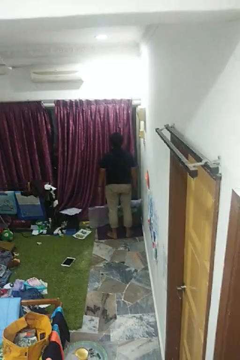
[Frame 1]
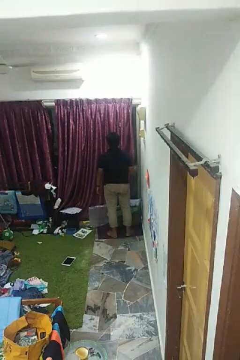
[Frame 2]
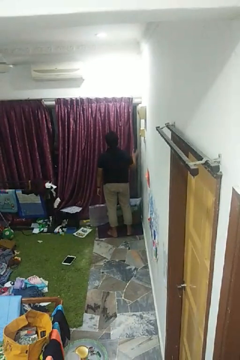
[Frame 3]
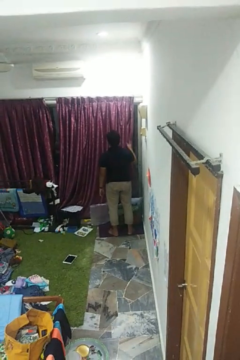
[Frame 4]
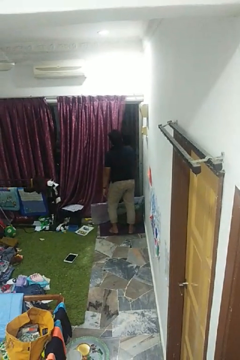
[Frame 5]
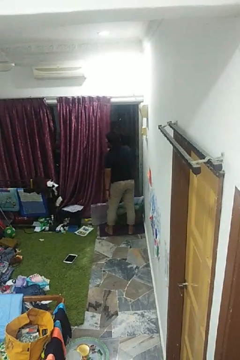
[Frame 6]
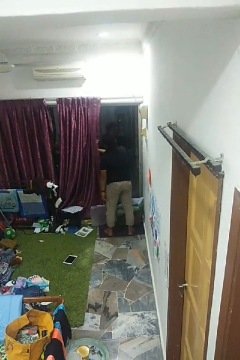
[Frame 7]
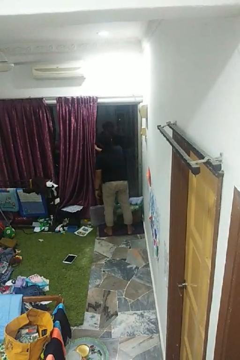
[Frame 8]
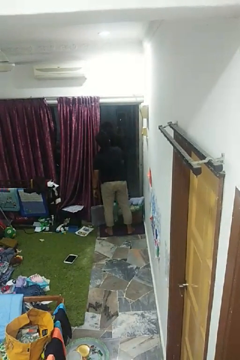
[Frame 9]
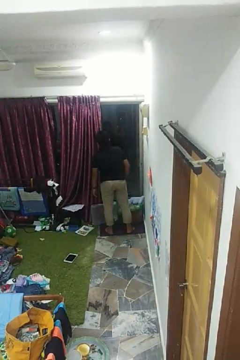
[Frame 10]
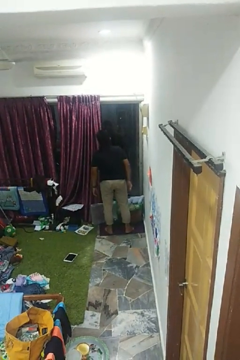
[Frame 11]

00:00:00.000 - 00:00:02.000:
person opens curtains

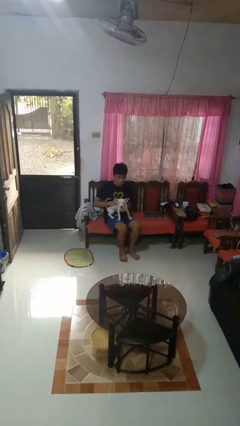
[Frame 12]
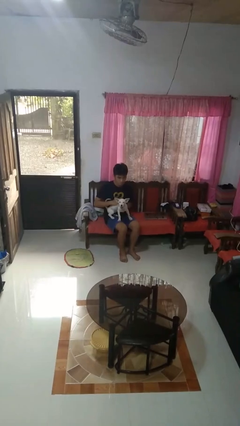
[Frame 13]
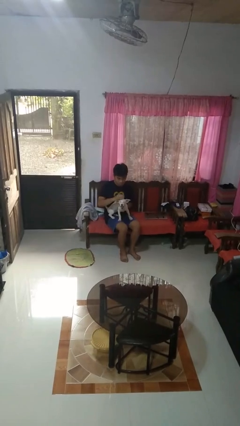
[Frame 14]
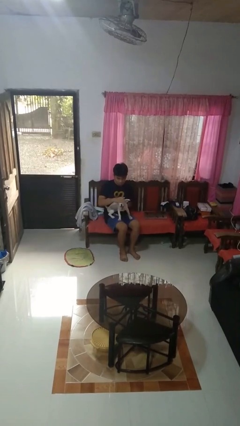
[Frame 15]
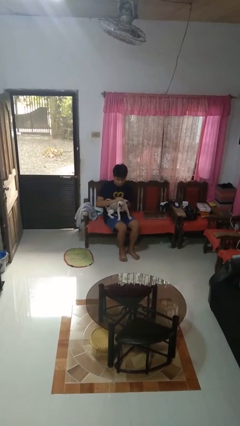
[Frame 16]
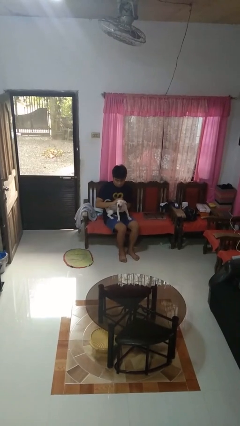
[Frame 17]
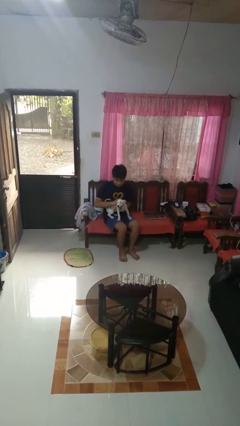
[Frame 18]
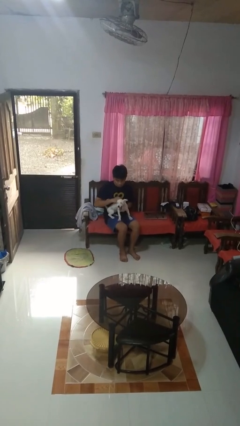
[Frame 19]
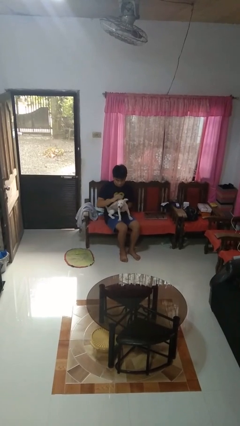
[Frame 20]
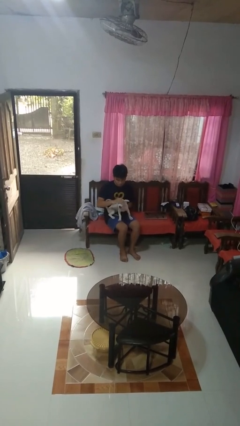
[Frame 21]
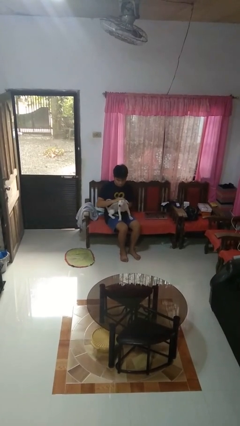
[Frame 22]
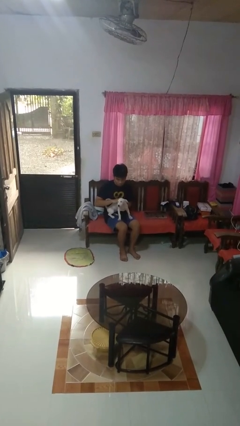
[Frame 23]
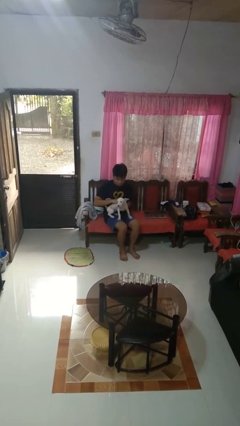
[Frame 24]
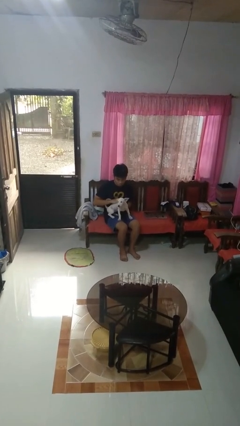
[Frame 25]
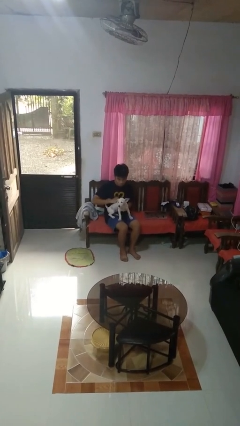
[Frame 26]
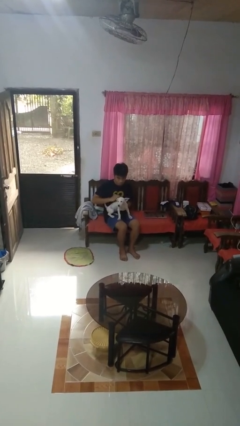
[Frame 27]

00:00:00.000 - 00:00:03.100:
person pets dog

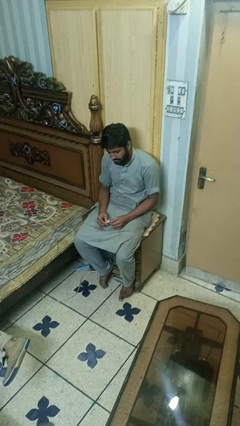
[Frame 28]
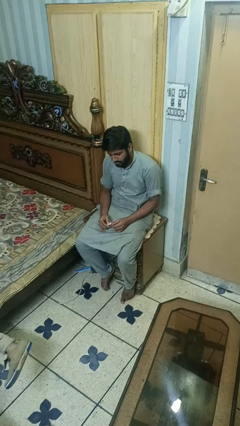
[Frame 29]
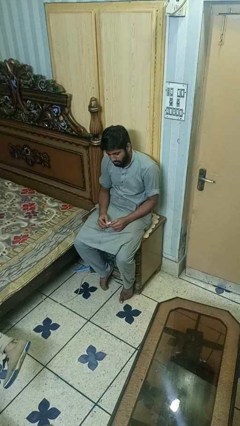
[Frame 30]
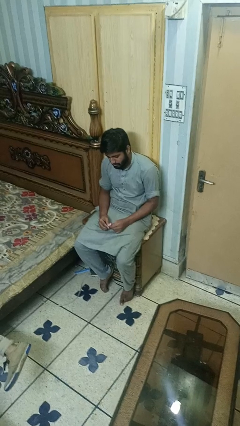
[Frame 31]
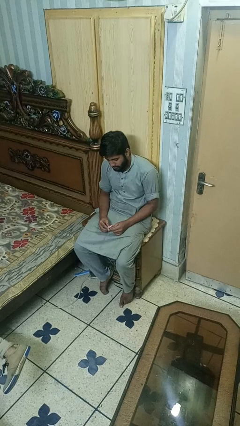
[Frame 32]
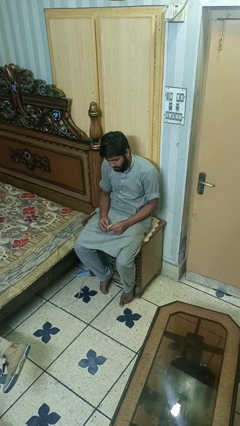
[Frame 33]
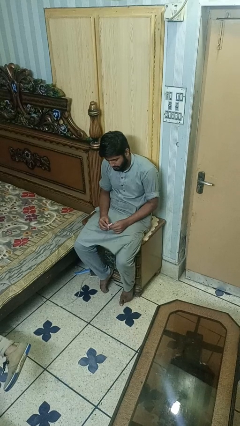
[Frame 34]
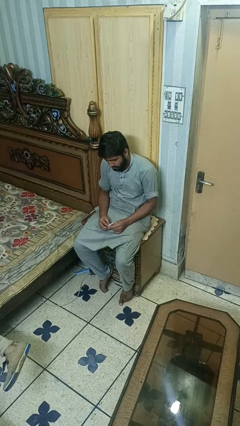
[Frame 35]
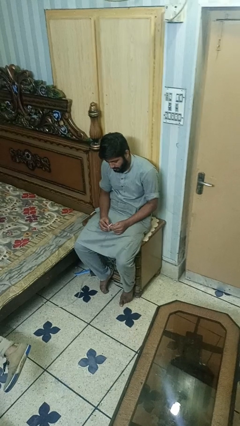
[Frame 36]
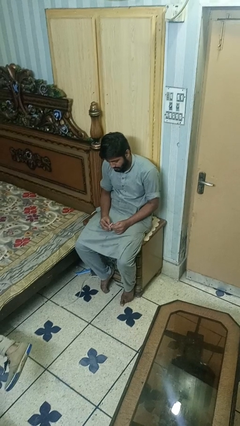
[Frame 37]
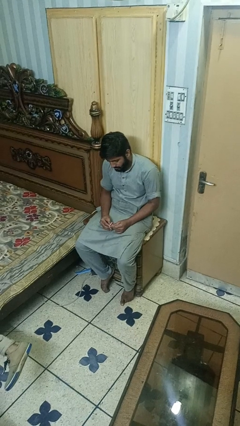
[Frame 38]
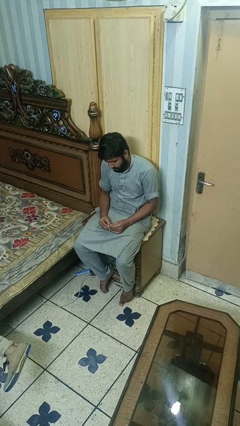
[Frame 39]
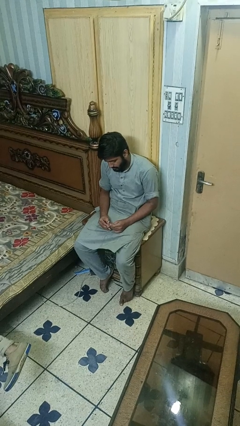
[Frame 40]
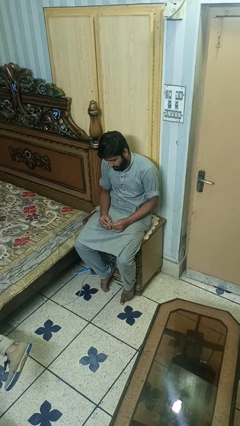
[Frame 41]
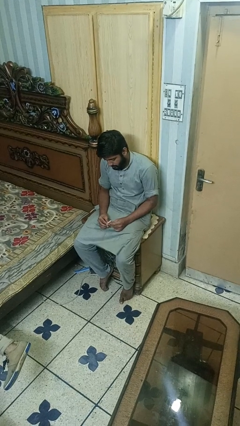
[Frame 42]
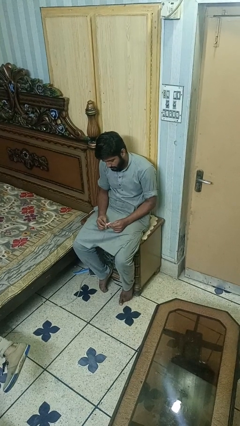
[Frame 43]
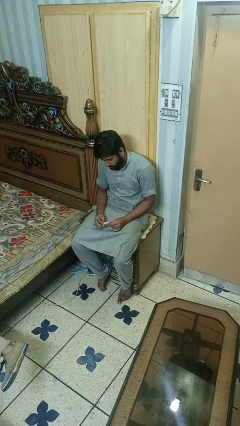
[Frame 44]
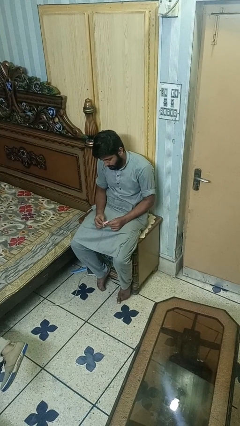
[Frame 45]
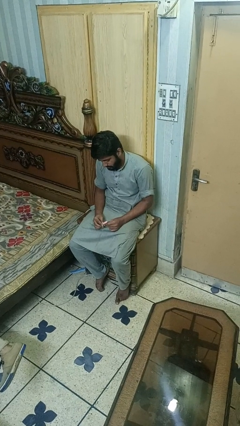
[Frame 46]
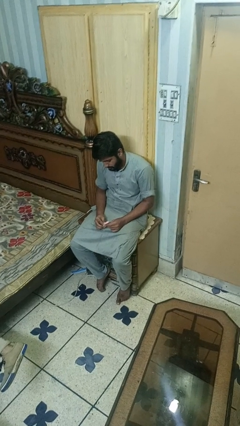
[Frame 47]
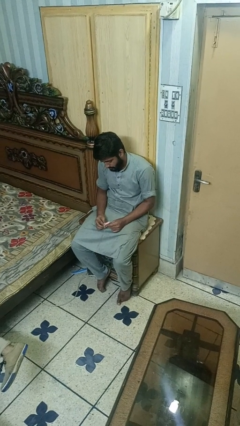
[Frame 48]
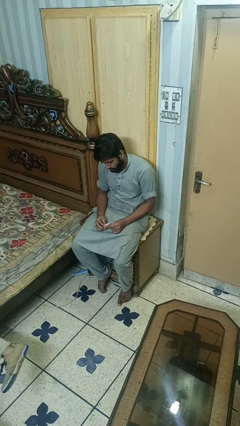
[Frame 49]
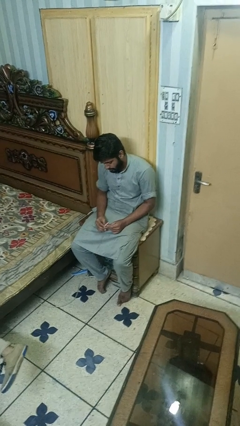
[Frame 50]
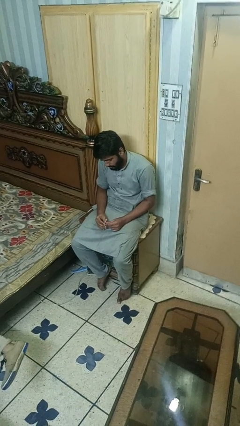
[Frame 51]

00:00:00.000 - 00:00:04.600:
person files fingernails

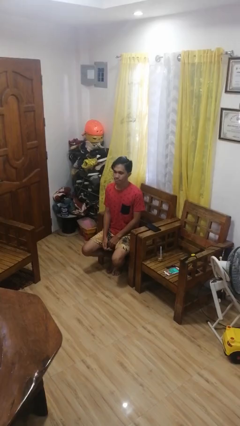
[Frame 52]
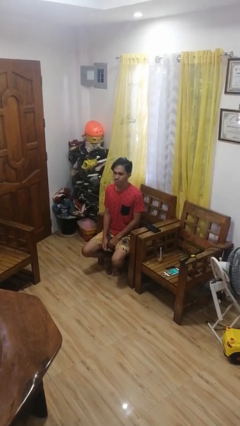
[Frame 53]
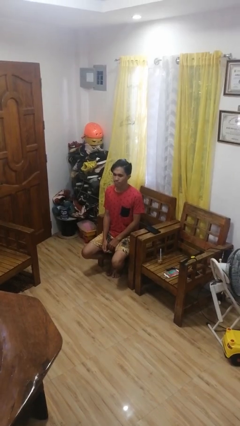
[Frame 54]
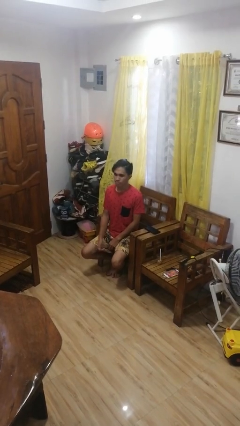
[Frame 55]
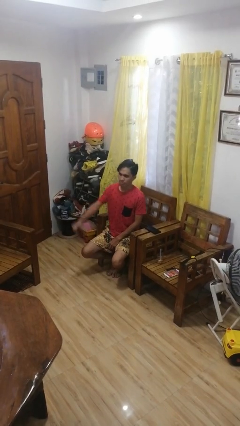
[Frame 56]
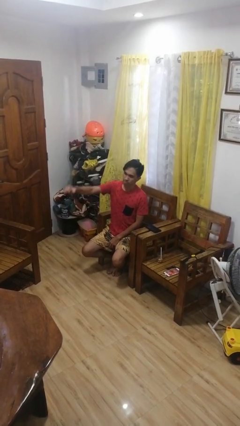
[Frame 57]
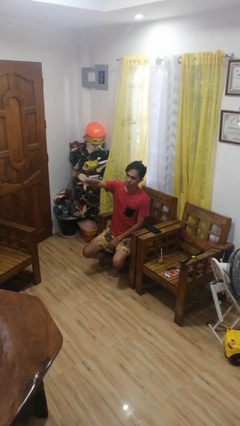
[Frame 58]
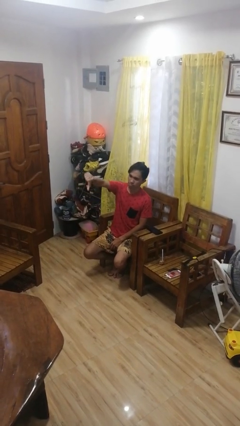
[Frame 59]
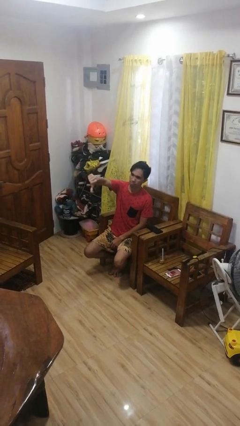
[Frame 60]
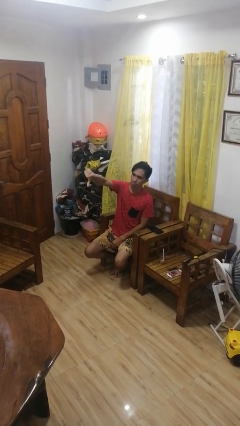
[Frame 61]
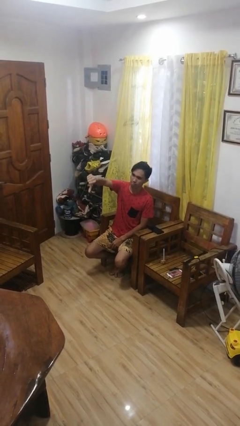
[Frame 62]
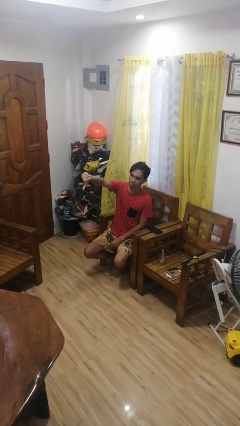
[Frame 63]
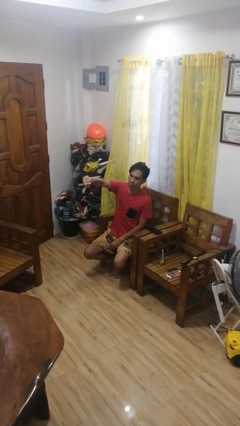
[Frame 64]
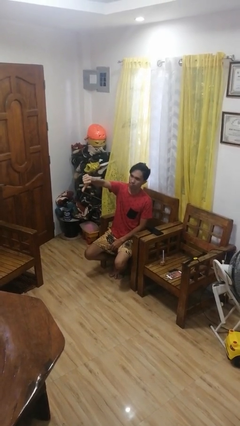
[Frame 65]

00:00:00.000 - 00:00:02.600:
person gestures thumbs down

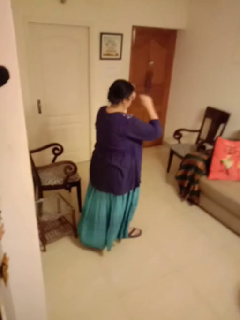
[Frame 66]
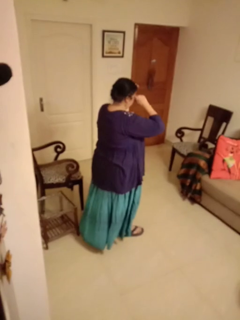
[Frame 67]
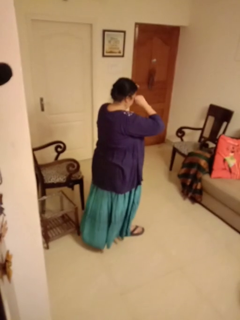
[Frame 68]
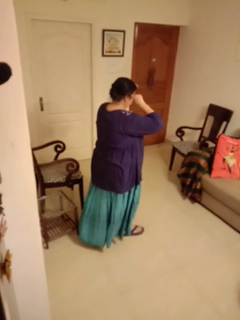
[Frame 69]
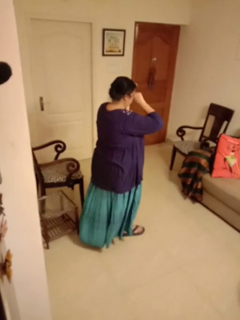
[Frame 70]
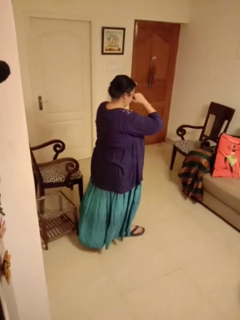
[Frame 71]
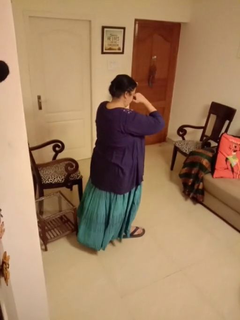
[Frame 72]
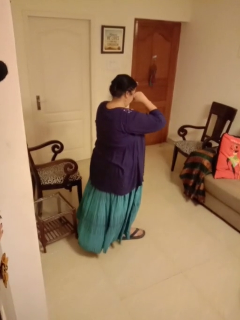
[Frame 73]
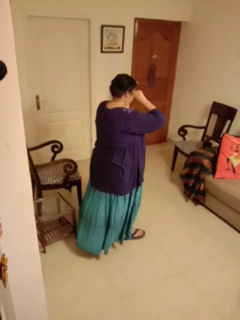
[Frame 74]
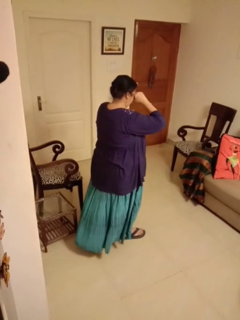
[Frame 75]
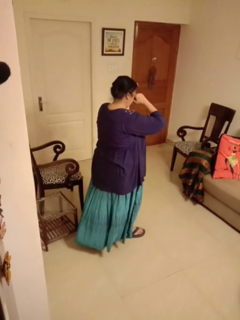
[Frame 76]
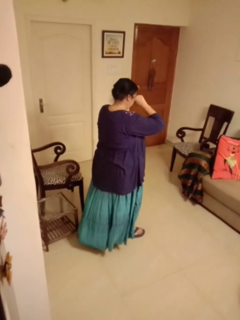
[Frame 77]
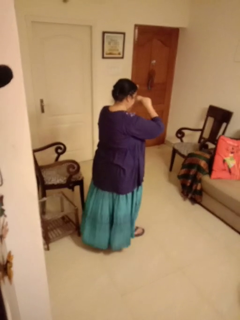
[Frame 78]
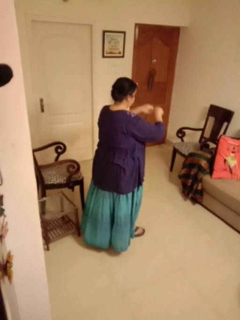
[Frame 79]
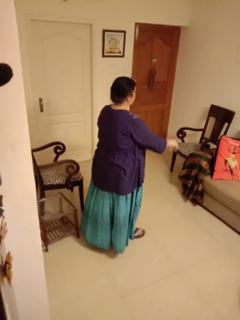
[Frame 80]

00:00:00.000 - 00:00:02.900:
person rubs eyes

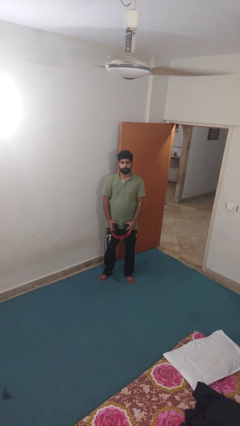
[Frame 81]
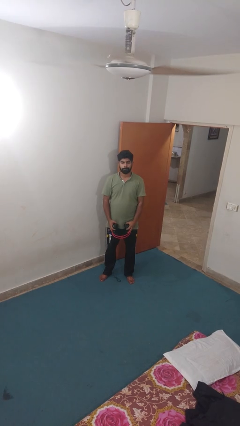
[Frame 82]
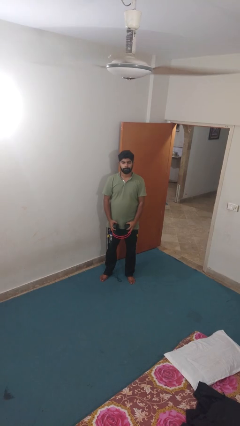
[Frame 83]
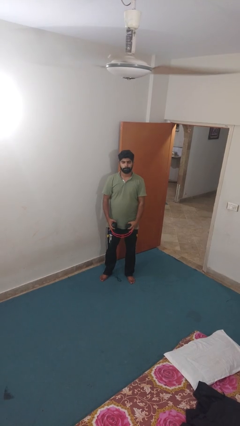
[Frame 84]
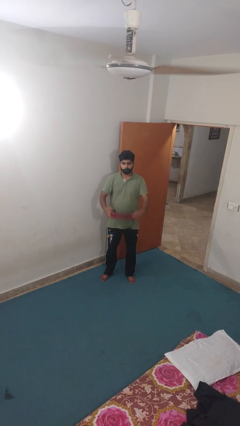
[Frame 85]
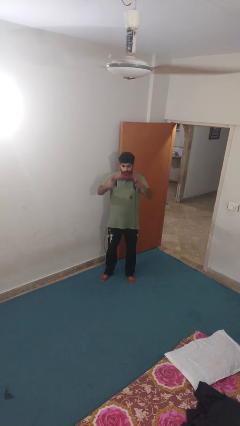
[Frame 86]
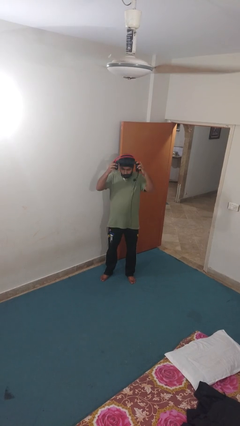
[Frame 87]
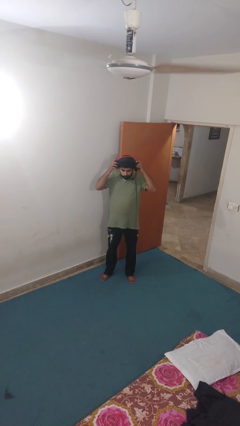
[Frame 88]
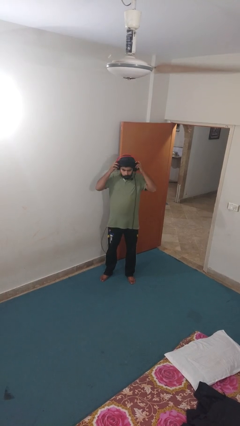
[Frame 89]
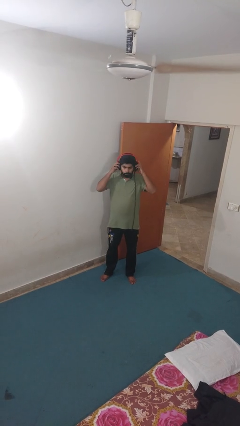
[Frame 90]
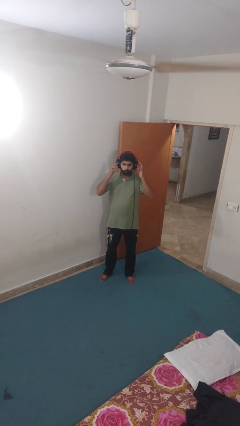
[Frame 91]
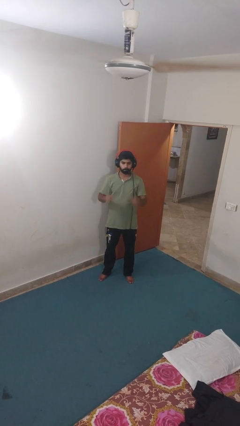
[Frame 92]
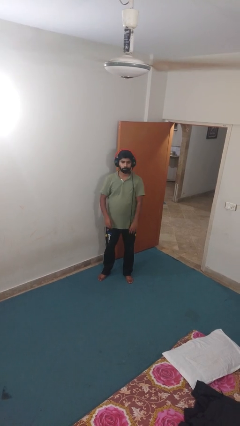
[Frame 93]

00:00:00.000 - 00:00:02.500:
person puts on headphones

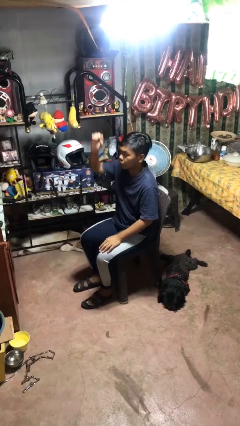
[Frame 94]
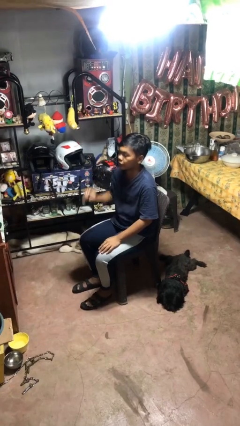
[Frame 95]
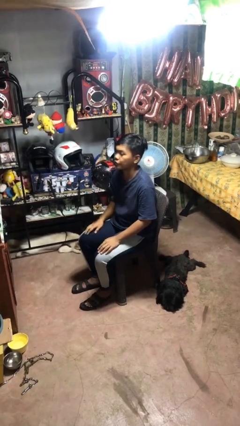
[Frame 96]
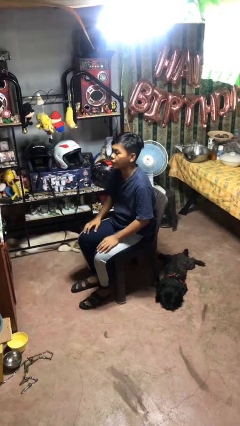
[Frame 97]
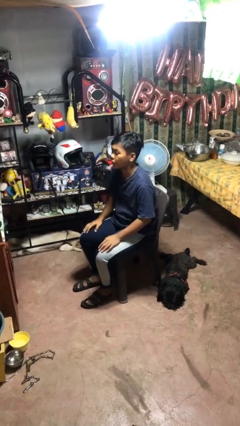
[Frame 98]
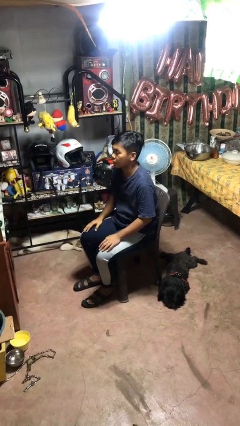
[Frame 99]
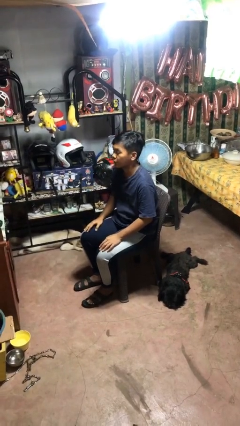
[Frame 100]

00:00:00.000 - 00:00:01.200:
person gestures lower hand
